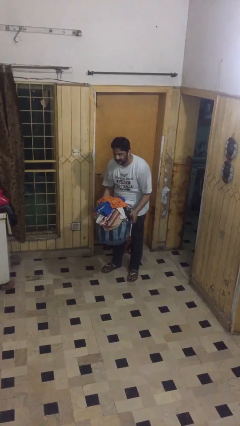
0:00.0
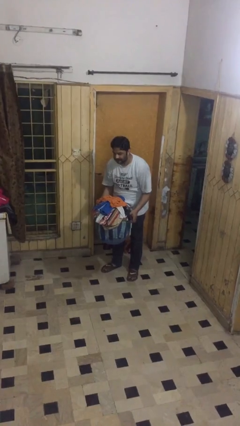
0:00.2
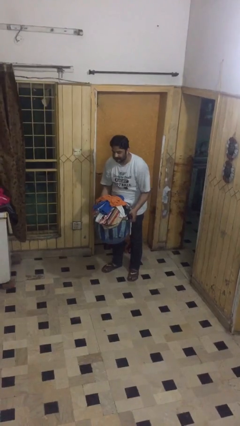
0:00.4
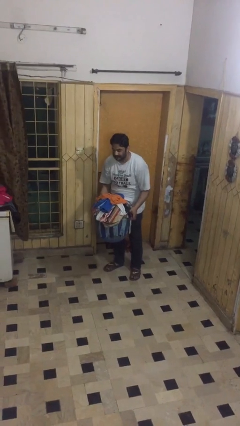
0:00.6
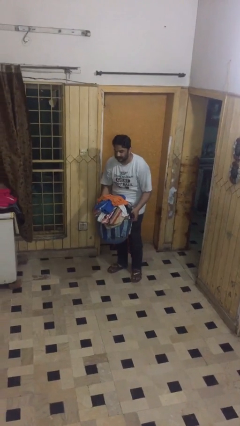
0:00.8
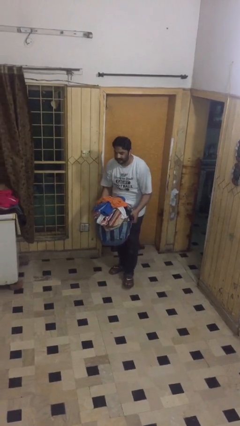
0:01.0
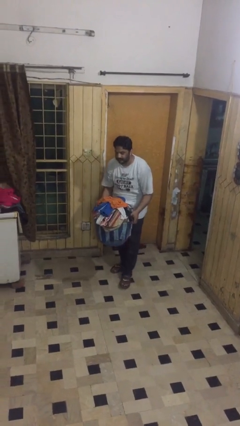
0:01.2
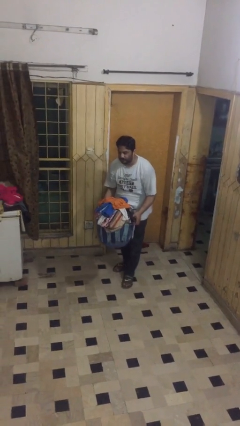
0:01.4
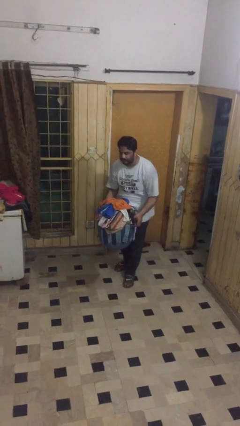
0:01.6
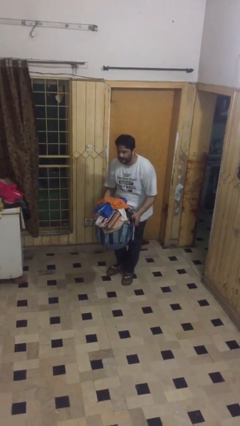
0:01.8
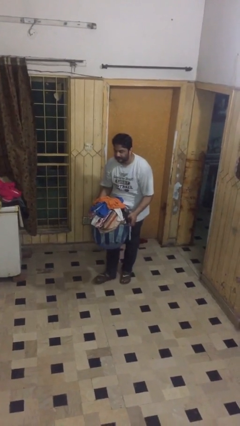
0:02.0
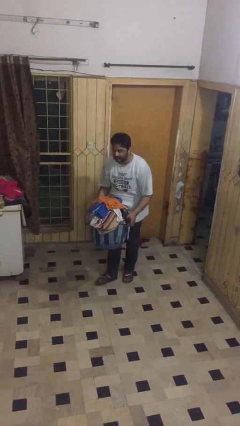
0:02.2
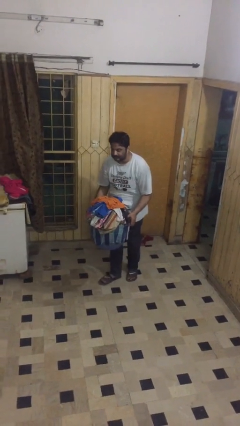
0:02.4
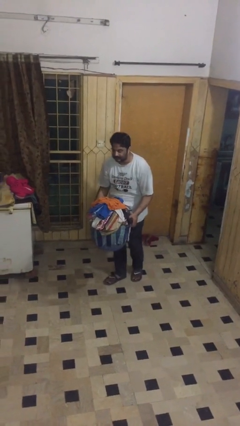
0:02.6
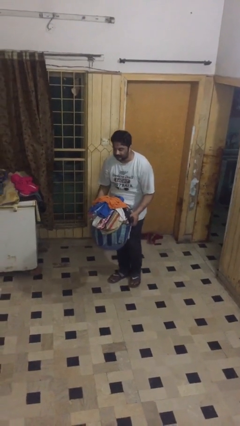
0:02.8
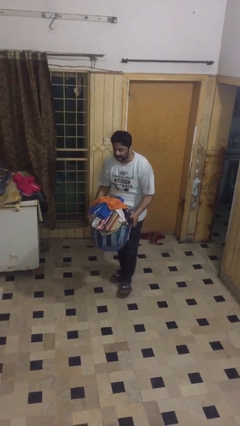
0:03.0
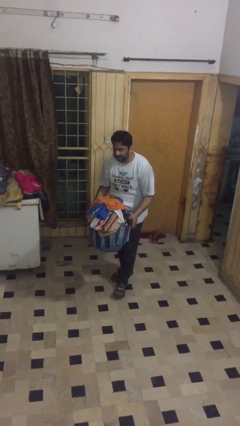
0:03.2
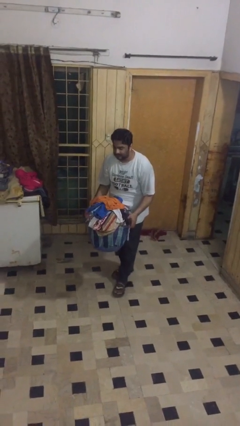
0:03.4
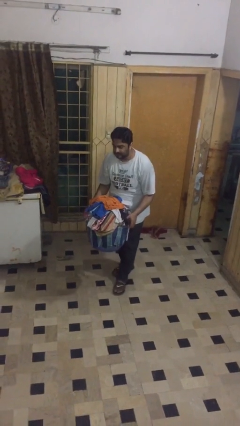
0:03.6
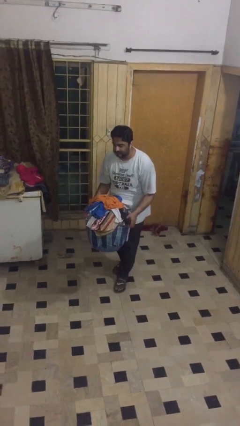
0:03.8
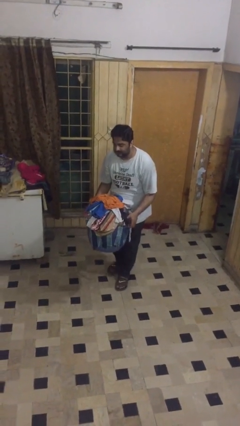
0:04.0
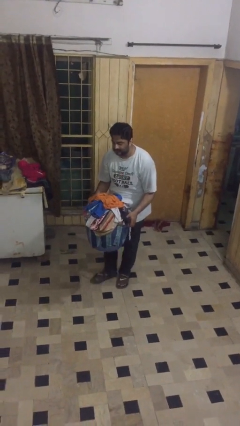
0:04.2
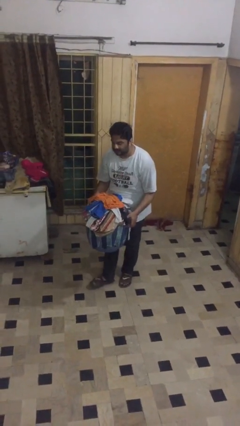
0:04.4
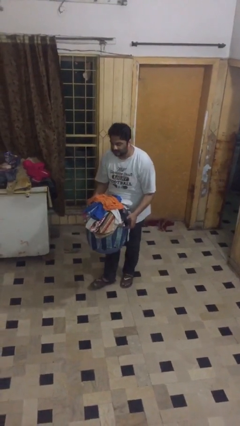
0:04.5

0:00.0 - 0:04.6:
person carries heavy object

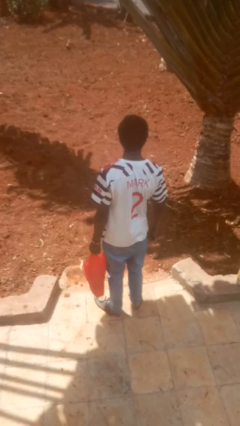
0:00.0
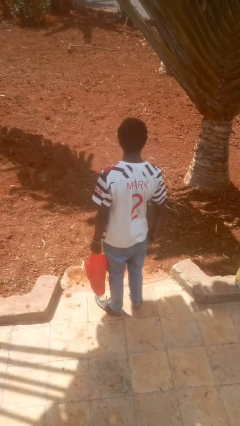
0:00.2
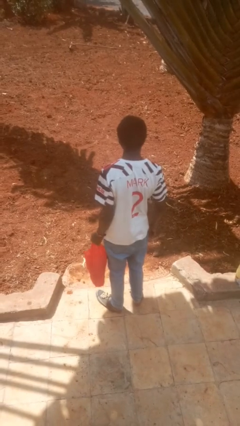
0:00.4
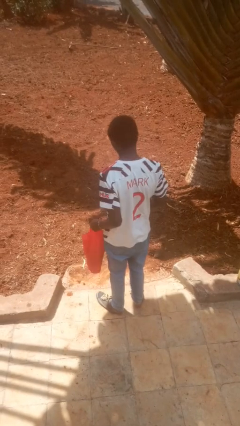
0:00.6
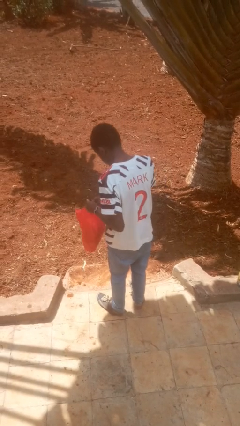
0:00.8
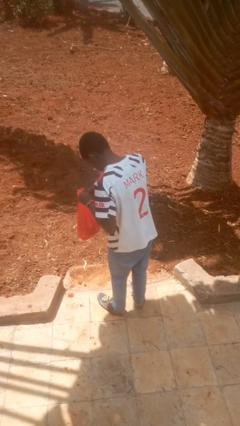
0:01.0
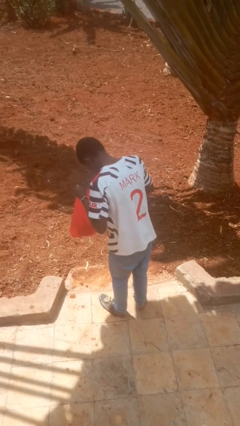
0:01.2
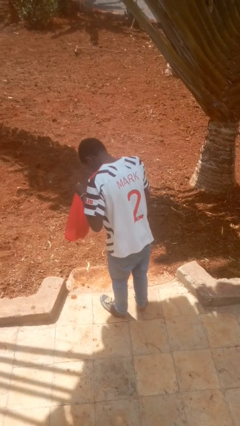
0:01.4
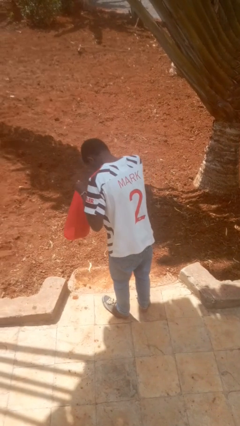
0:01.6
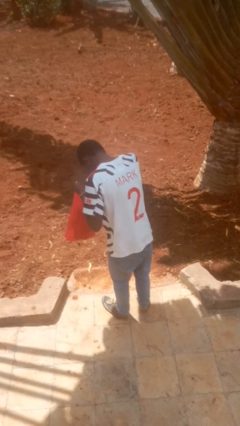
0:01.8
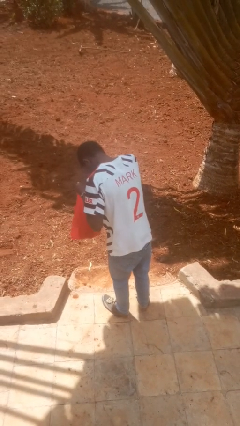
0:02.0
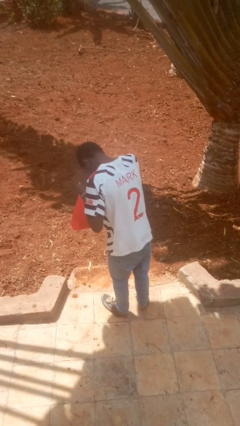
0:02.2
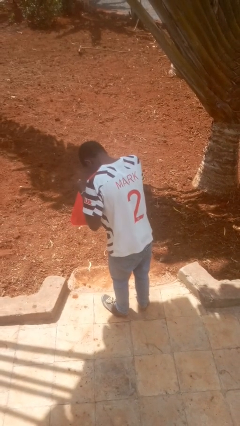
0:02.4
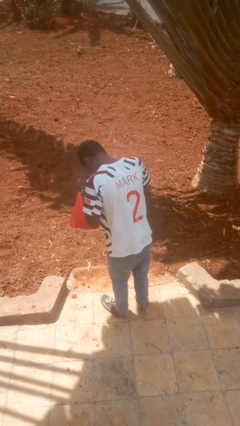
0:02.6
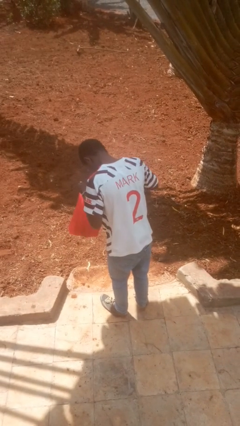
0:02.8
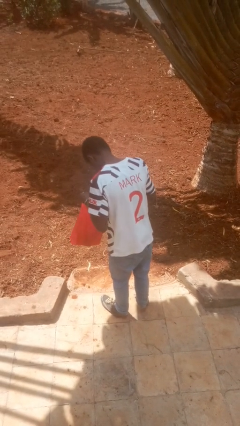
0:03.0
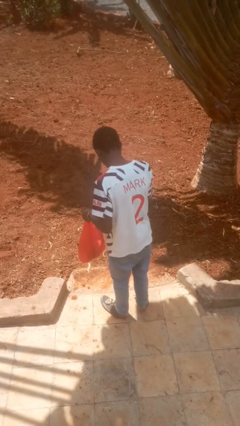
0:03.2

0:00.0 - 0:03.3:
person searches in bag

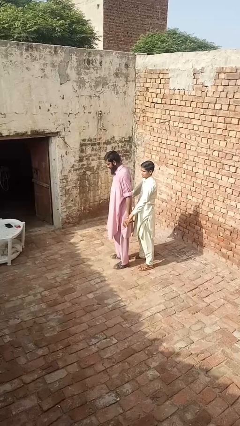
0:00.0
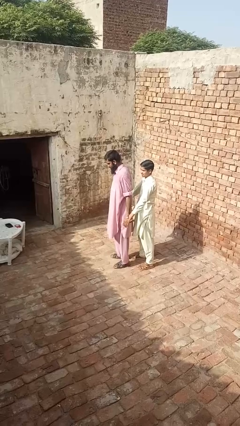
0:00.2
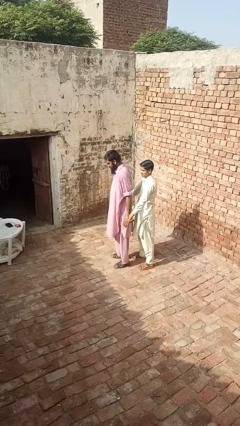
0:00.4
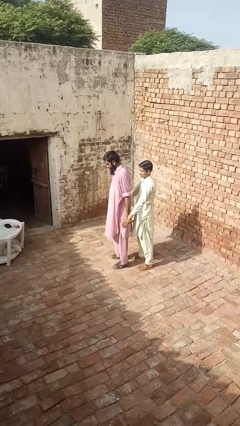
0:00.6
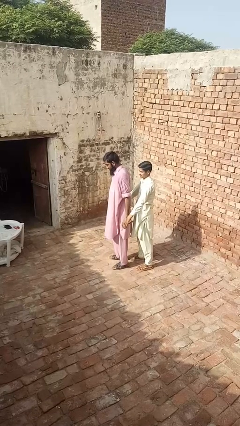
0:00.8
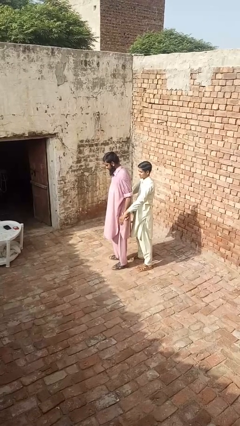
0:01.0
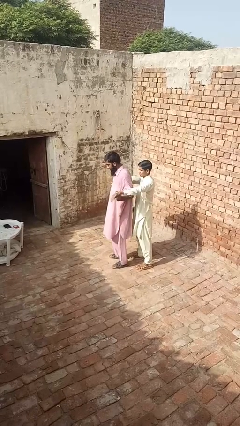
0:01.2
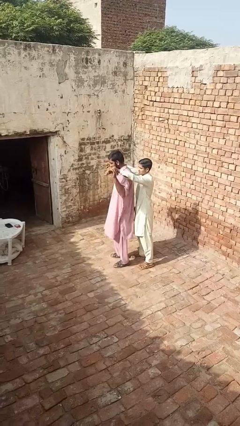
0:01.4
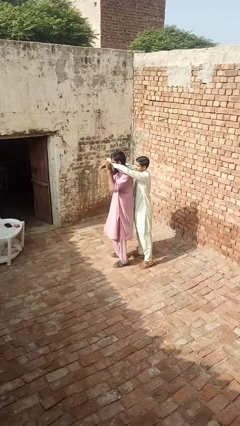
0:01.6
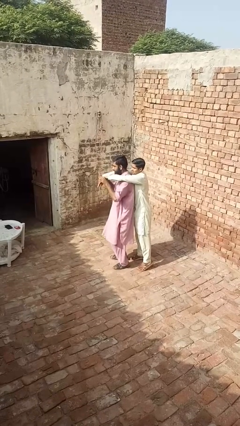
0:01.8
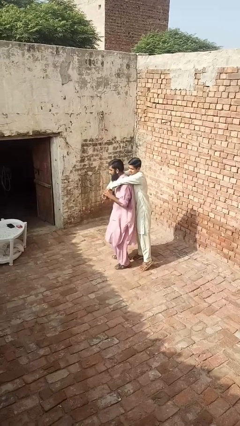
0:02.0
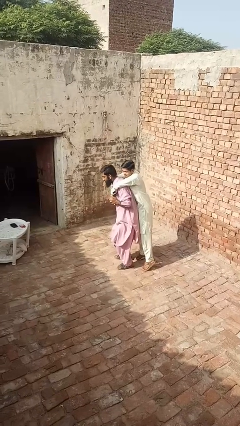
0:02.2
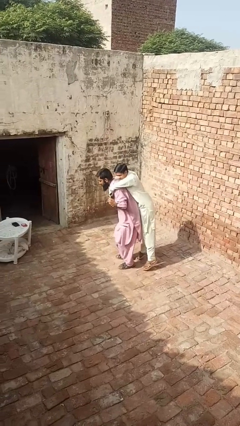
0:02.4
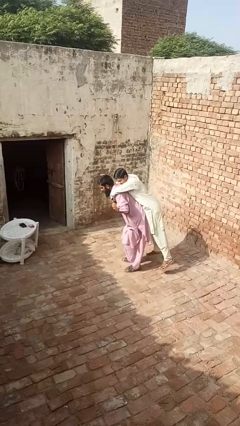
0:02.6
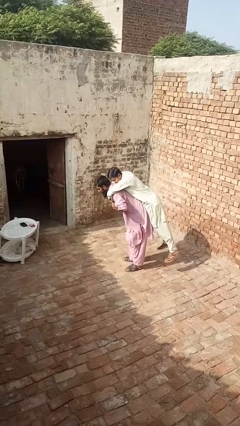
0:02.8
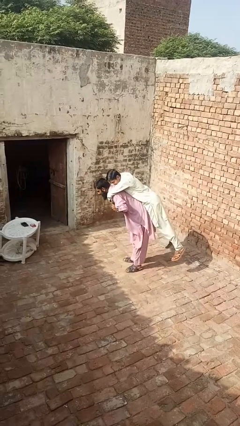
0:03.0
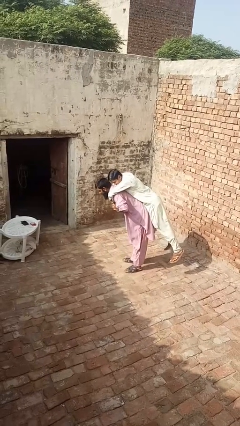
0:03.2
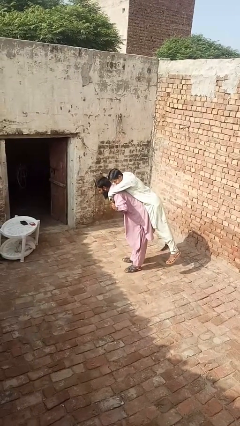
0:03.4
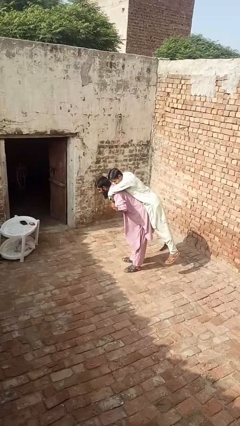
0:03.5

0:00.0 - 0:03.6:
person picks up person

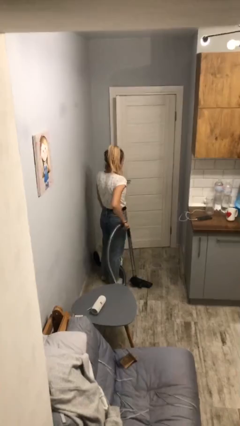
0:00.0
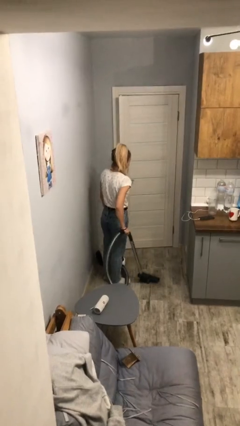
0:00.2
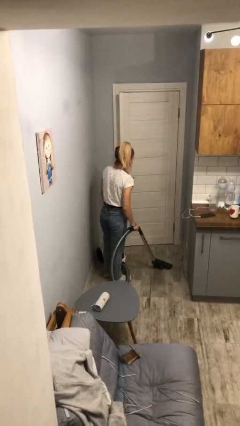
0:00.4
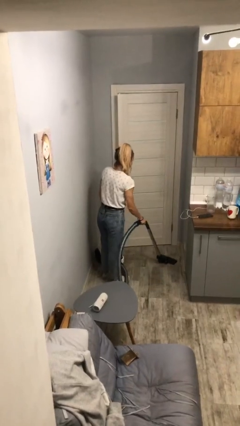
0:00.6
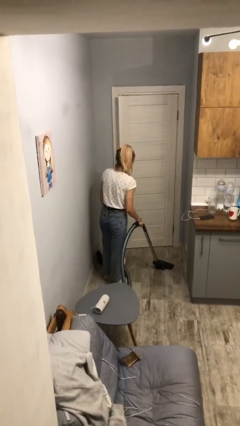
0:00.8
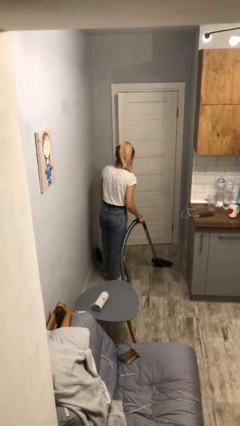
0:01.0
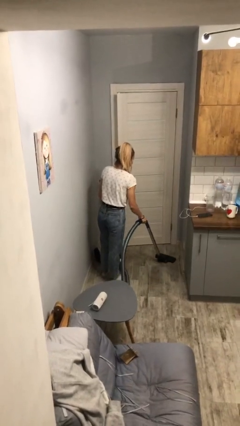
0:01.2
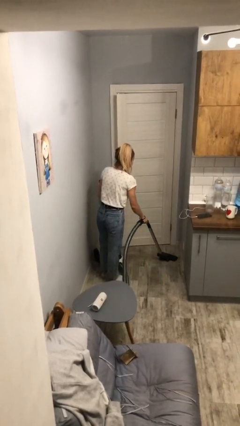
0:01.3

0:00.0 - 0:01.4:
person vacuums carpet

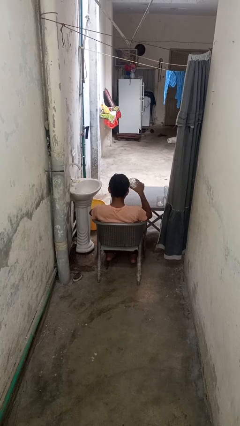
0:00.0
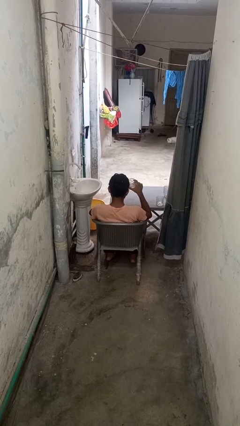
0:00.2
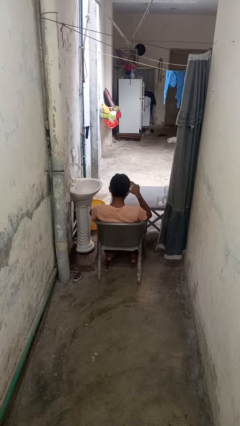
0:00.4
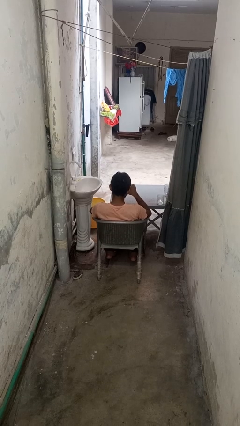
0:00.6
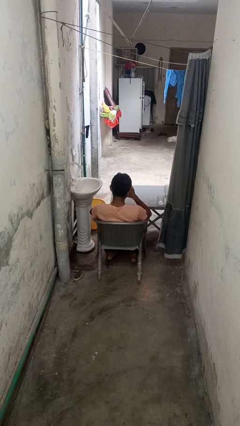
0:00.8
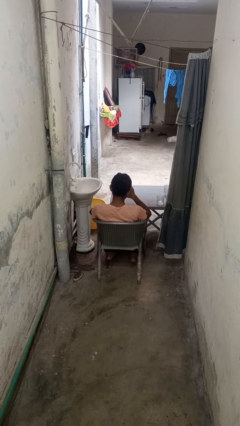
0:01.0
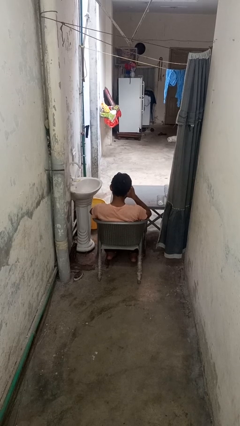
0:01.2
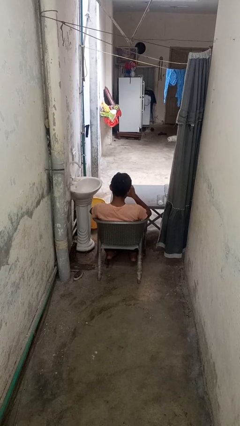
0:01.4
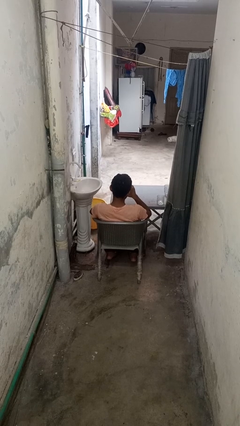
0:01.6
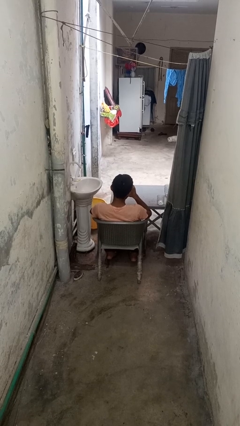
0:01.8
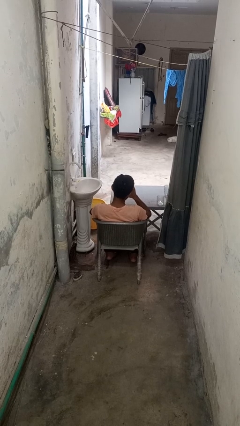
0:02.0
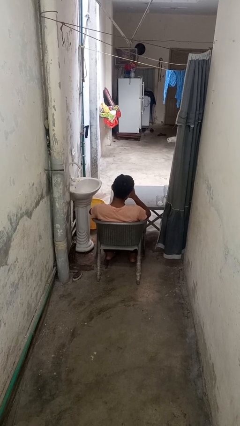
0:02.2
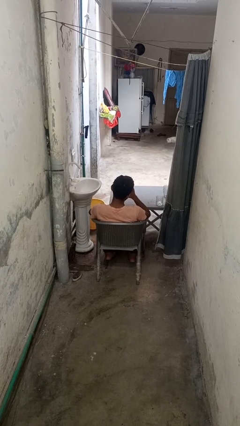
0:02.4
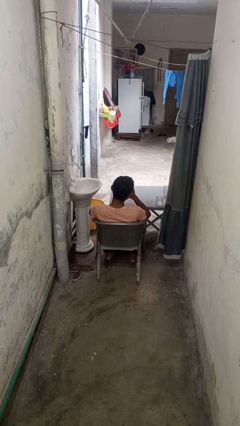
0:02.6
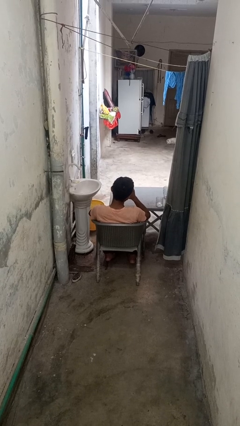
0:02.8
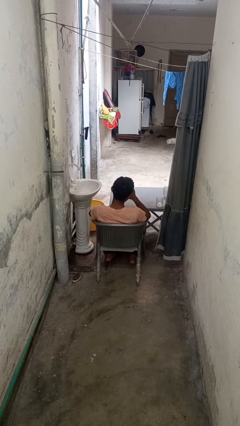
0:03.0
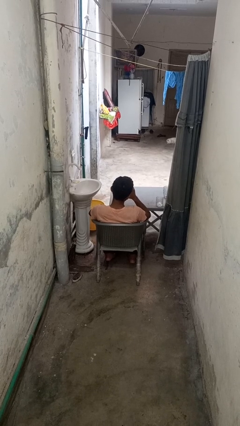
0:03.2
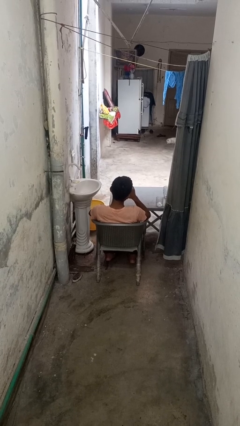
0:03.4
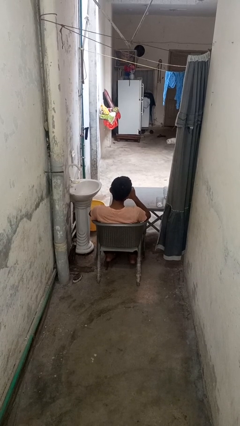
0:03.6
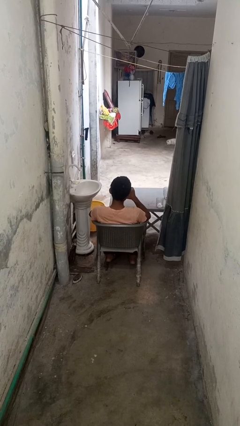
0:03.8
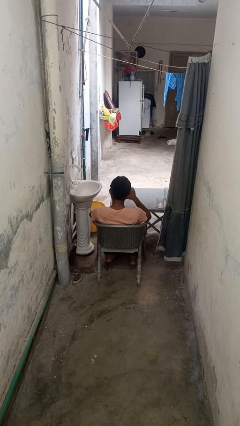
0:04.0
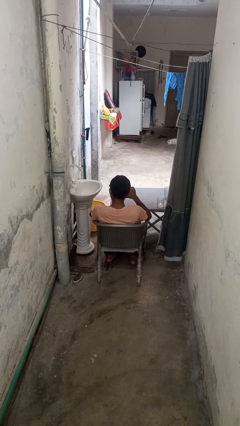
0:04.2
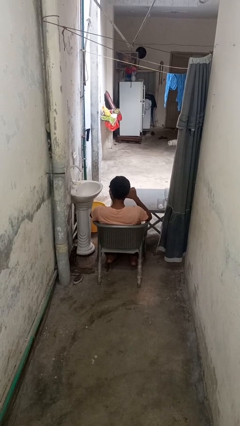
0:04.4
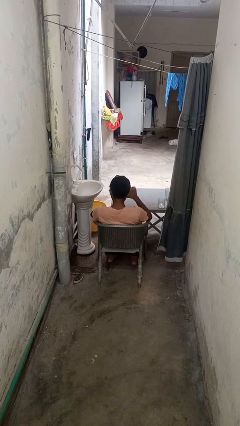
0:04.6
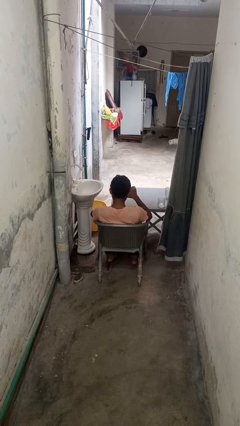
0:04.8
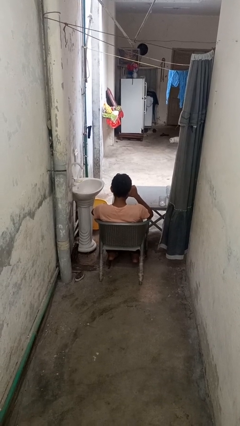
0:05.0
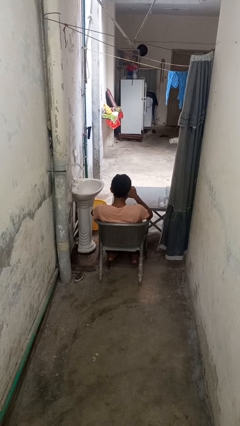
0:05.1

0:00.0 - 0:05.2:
person drinks from shotglass
